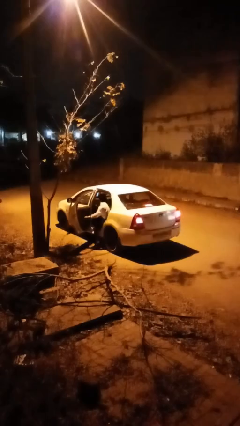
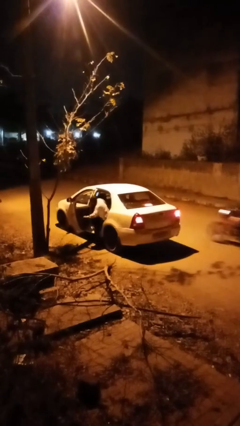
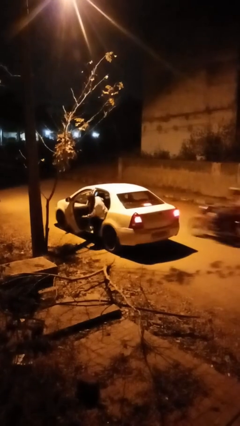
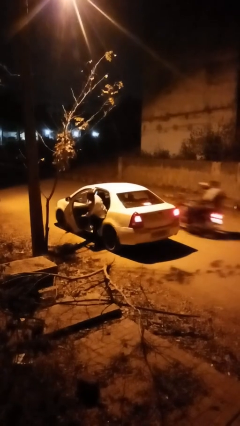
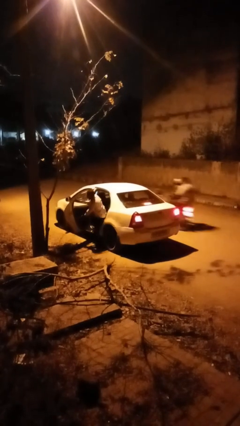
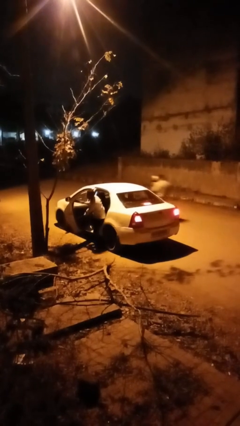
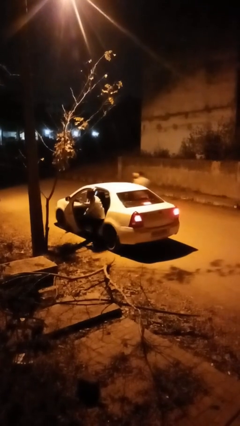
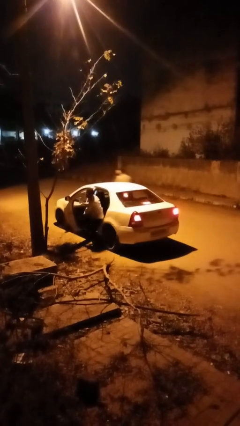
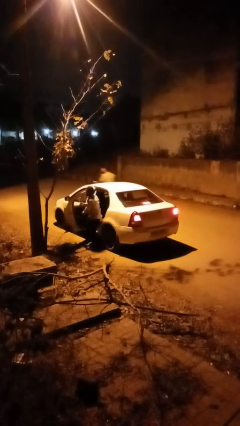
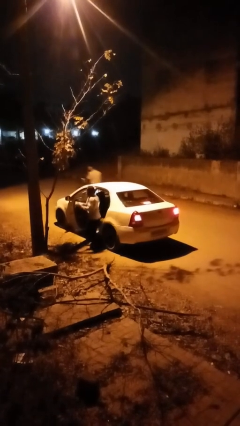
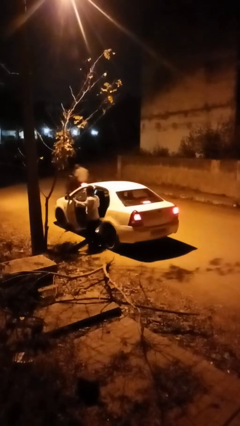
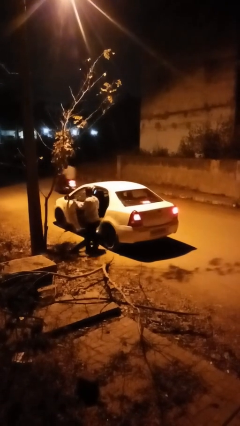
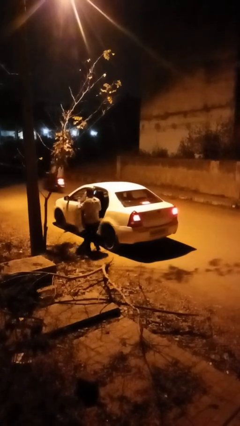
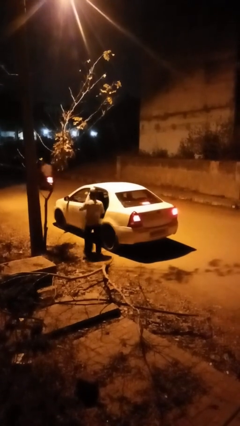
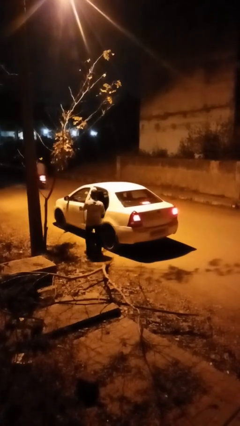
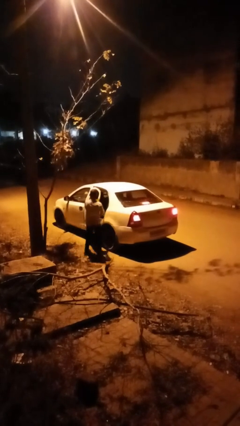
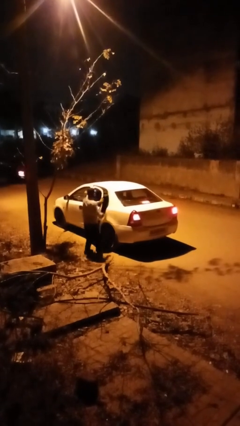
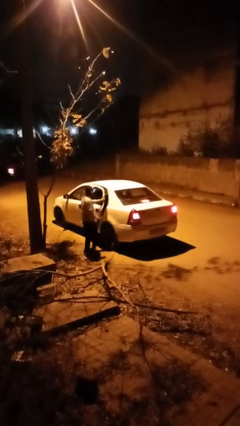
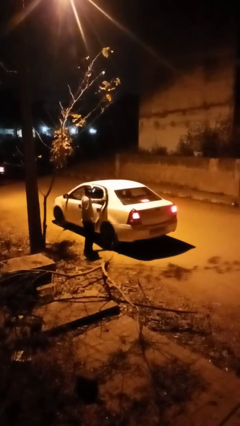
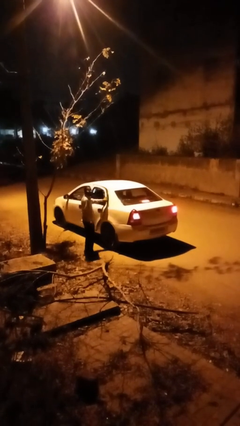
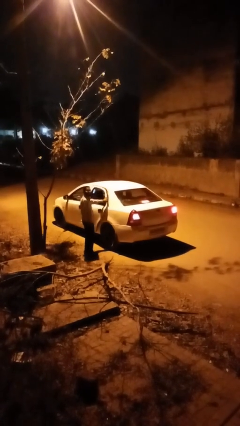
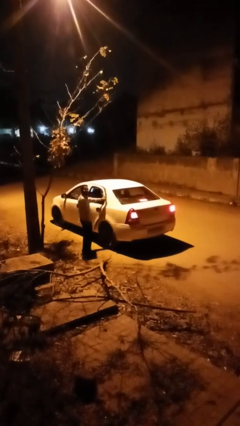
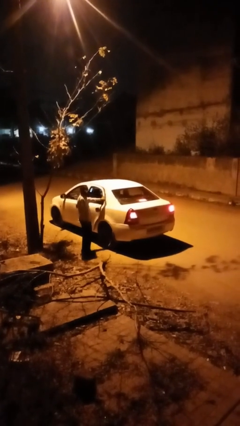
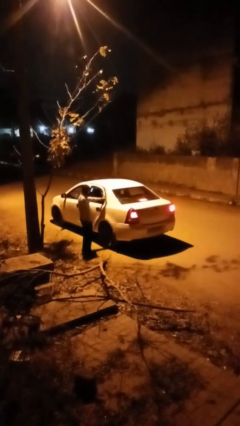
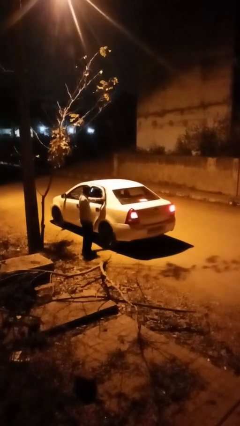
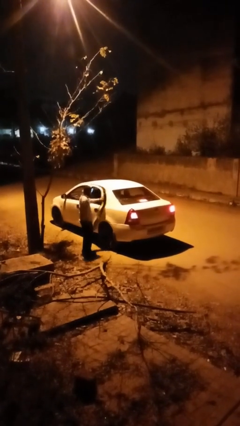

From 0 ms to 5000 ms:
car drops off person

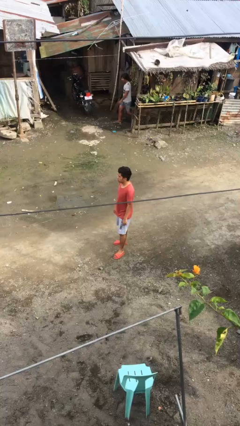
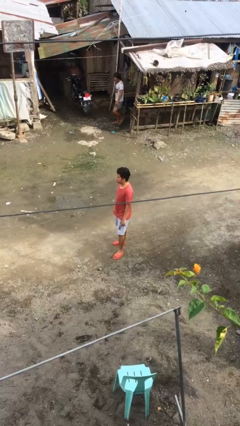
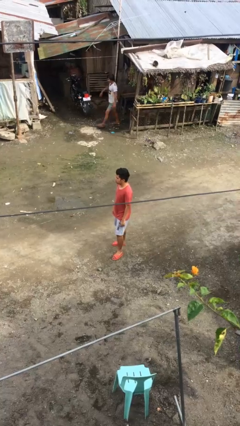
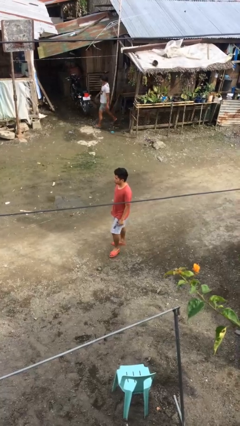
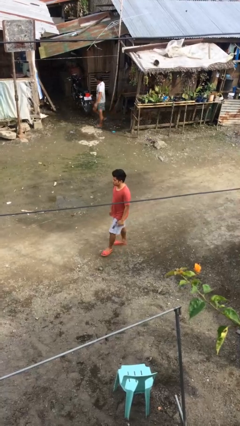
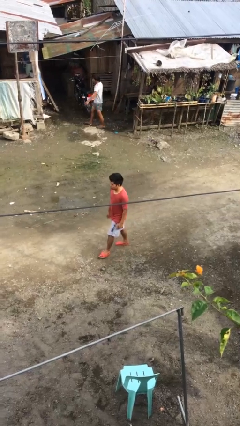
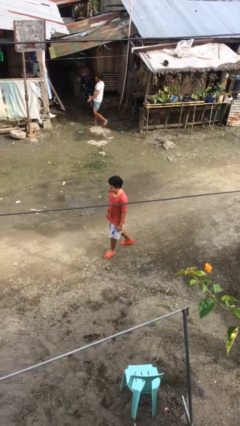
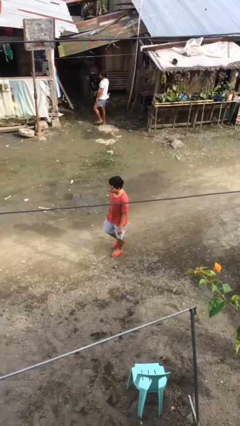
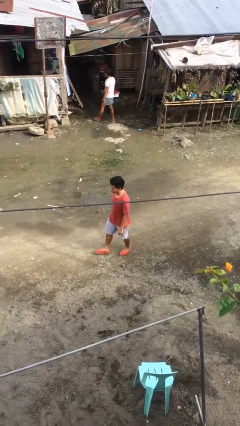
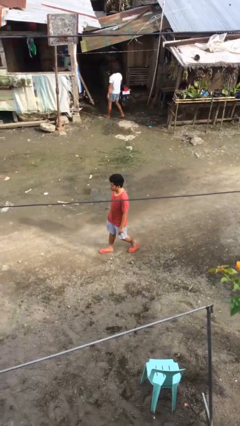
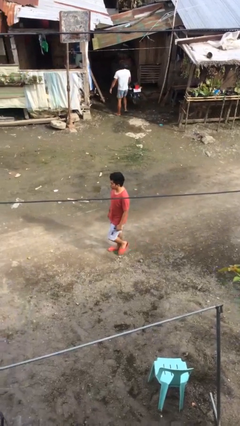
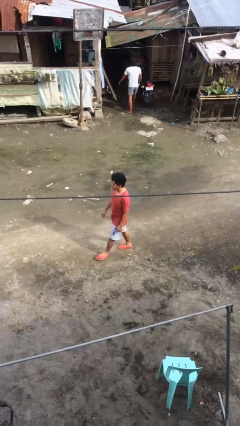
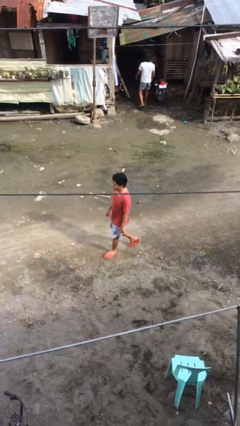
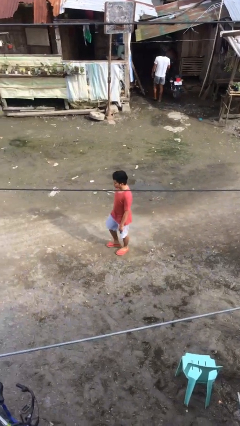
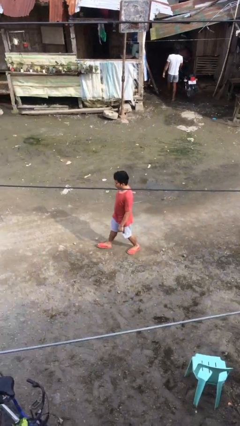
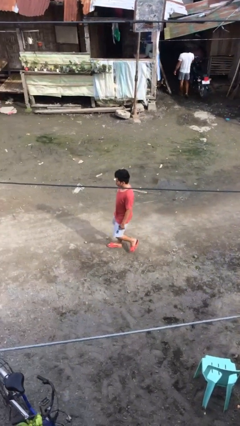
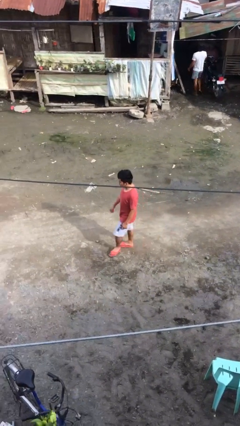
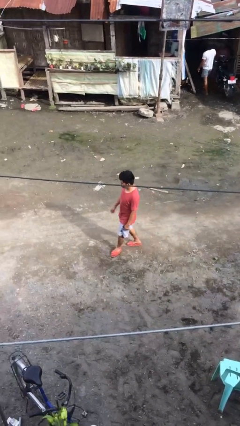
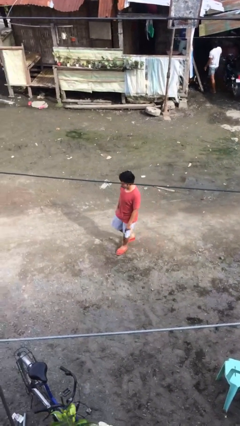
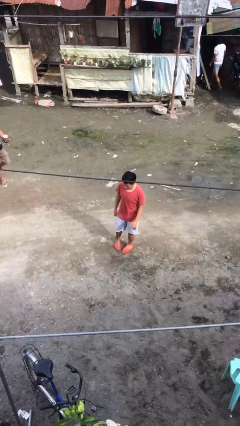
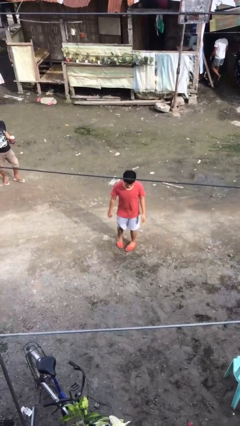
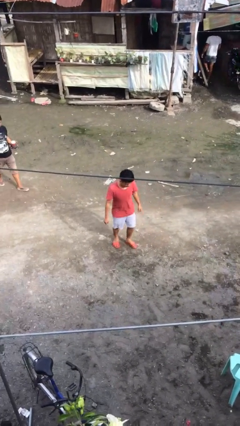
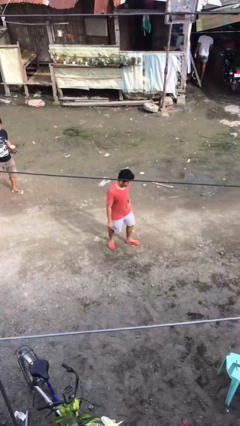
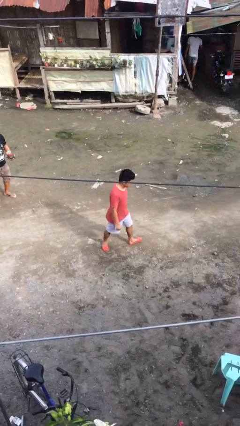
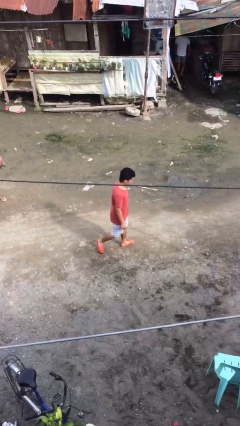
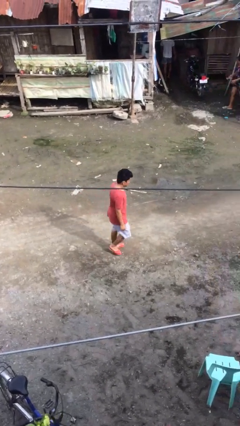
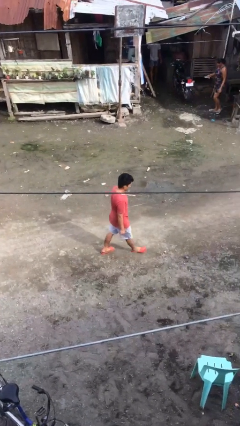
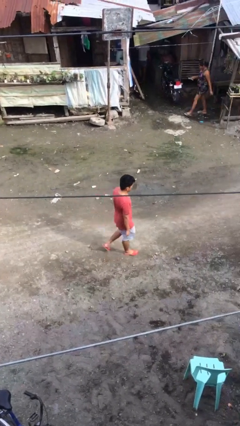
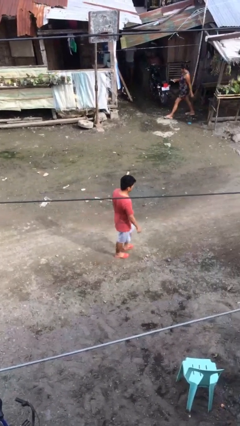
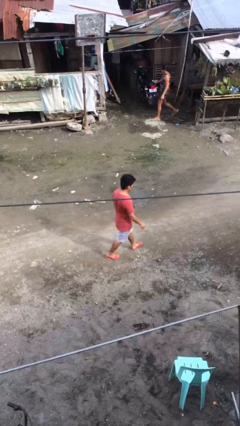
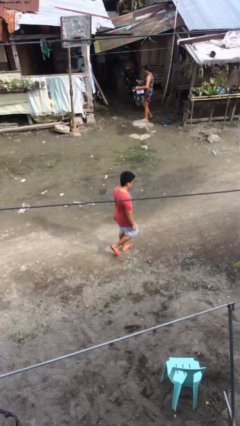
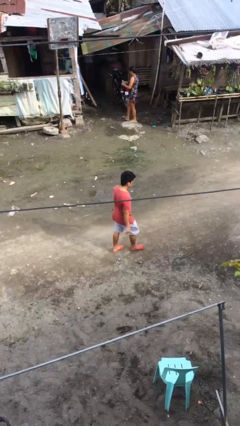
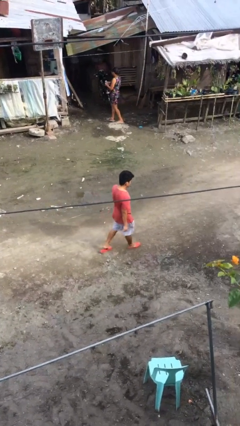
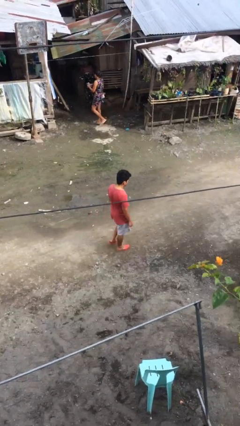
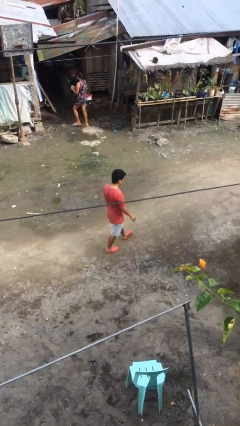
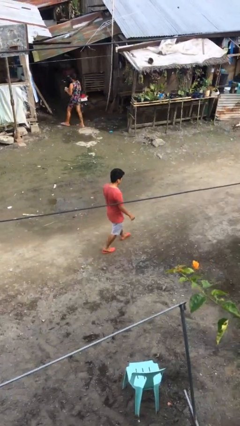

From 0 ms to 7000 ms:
person walks

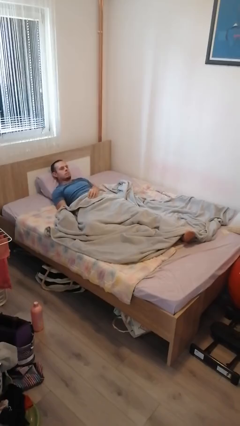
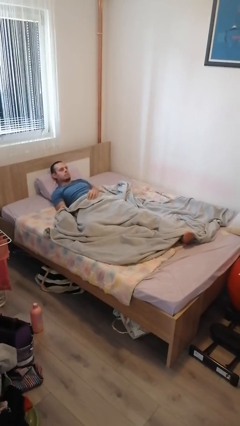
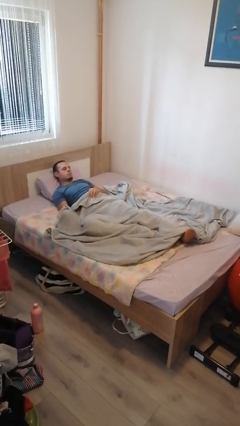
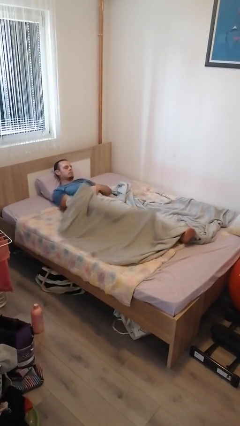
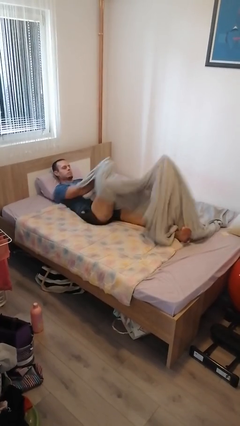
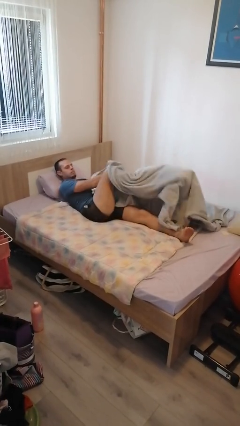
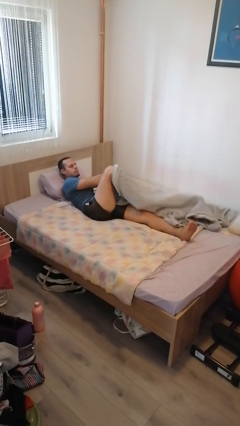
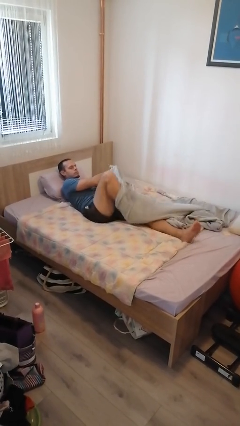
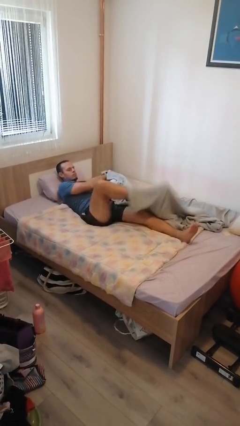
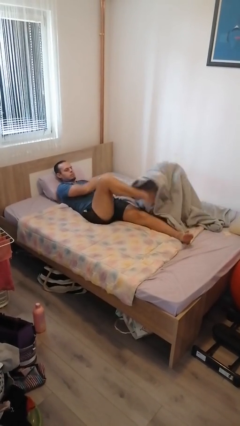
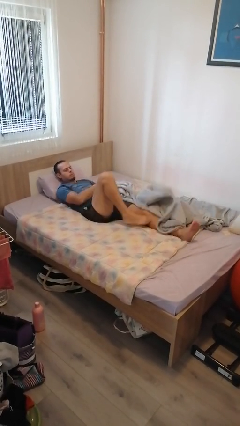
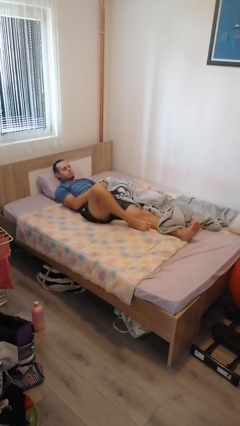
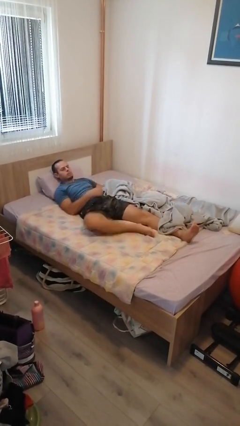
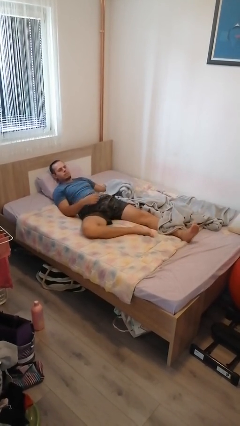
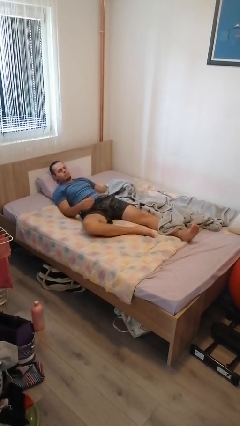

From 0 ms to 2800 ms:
person uncovers with bedsheets

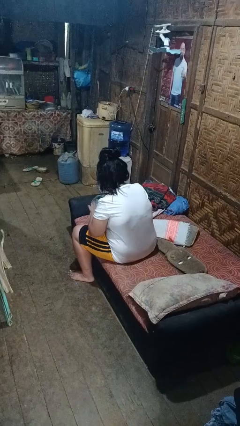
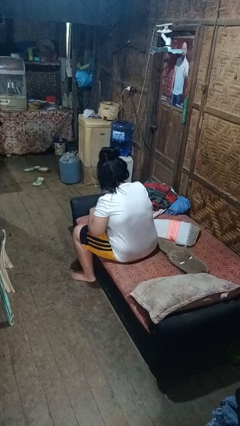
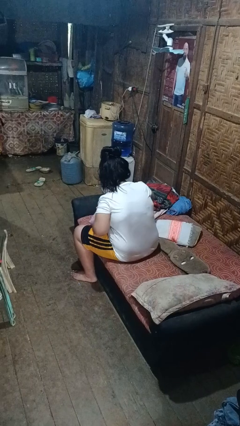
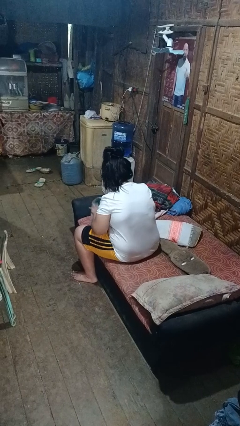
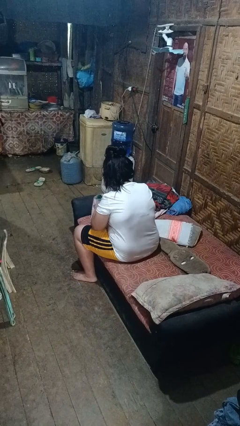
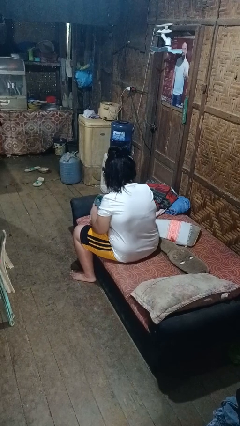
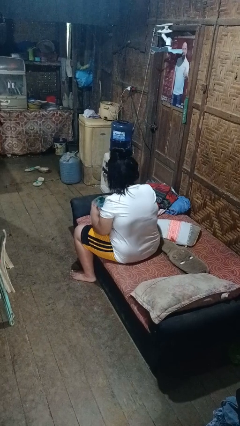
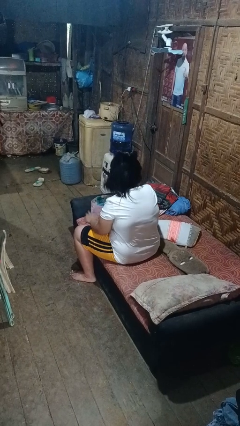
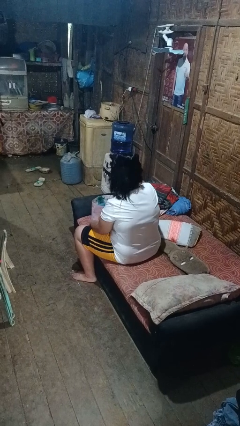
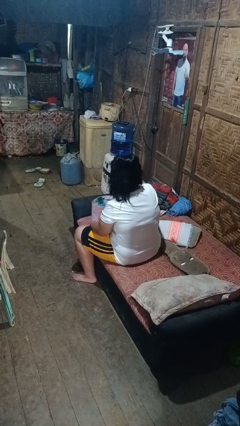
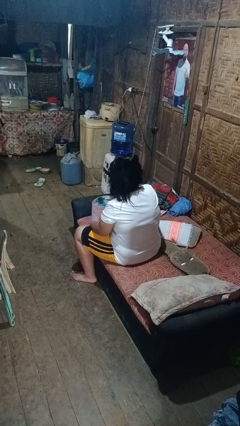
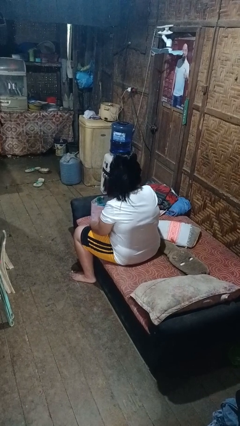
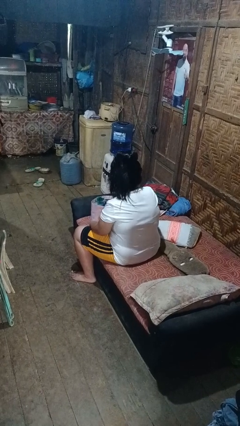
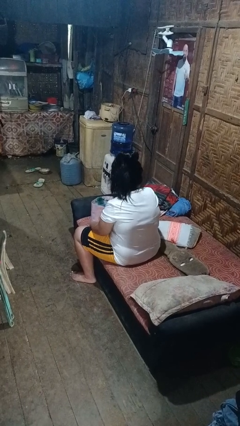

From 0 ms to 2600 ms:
person searches in bag

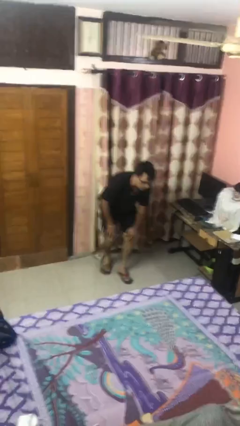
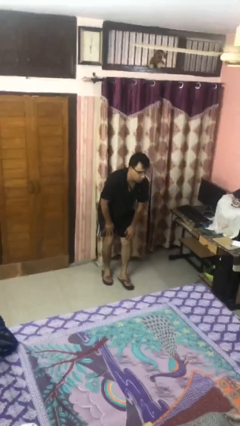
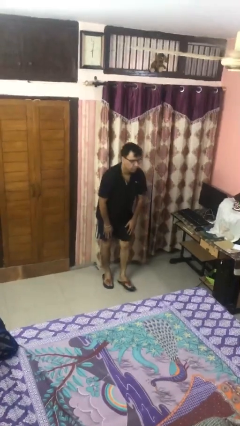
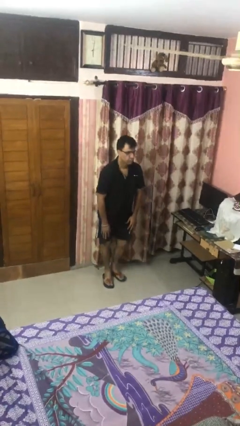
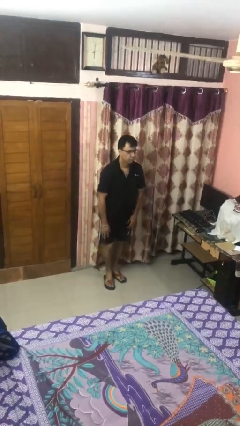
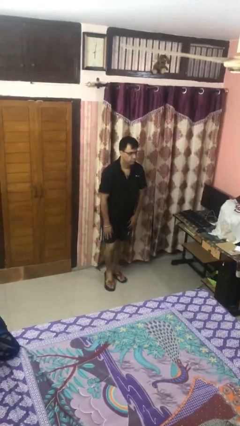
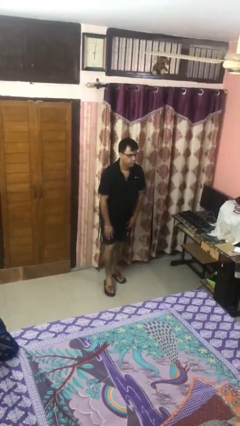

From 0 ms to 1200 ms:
person stands up from floor
